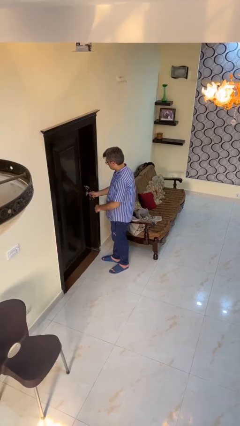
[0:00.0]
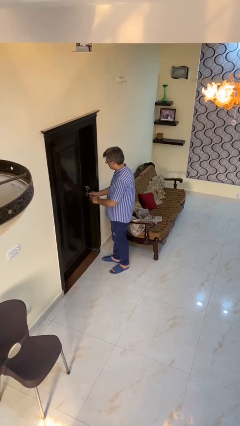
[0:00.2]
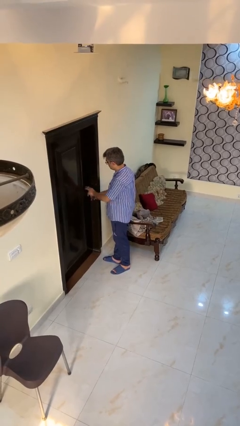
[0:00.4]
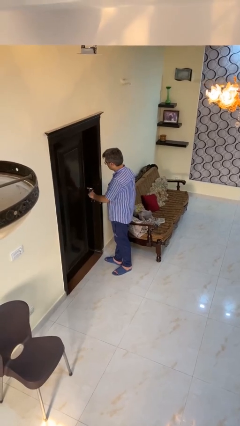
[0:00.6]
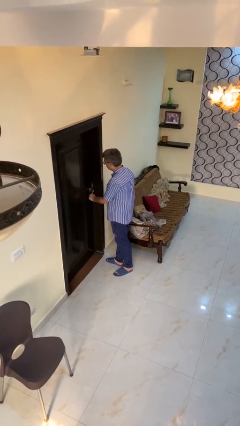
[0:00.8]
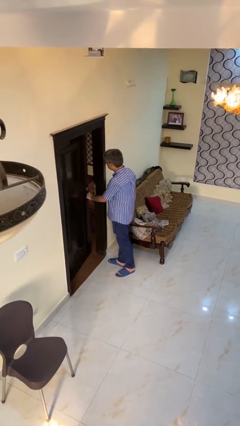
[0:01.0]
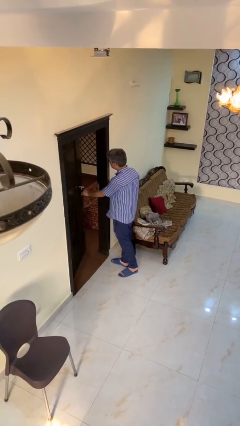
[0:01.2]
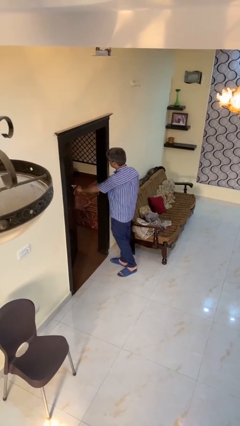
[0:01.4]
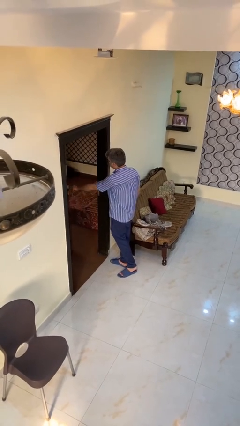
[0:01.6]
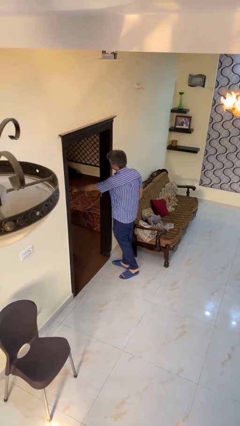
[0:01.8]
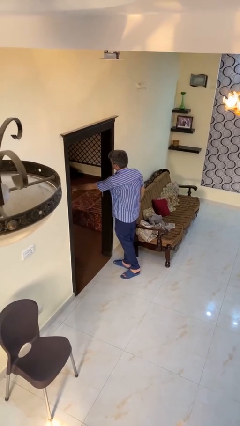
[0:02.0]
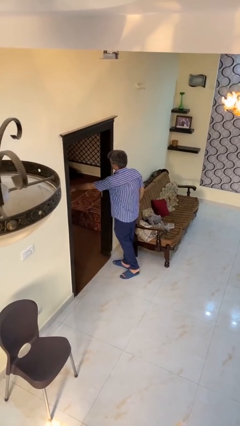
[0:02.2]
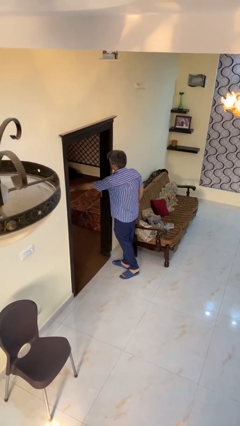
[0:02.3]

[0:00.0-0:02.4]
person opens facility door

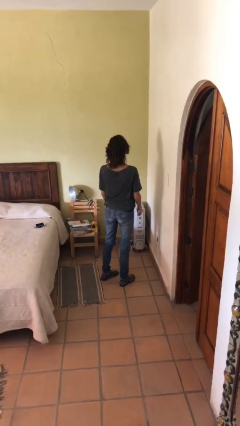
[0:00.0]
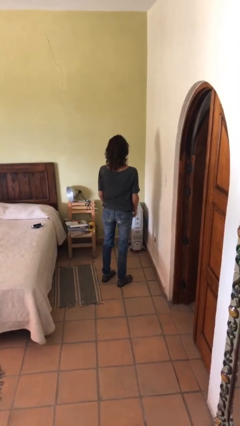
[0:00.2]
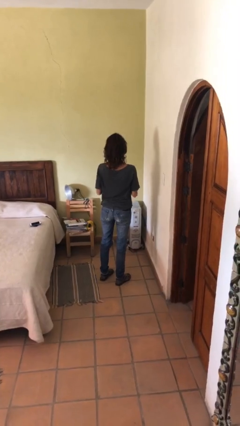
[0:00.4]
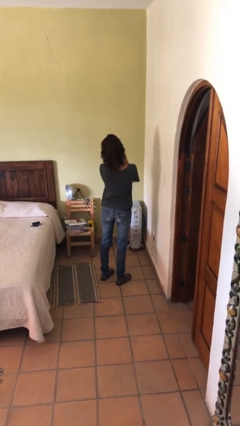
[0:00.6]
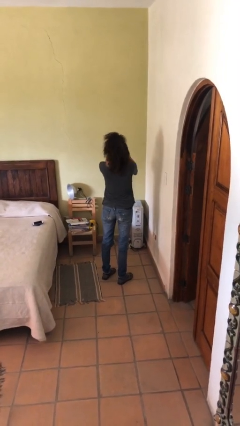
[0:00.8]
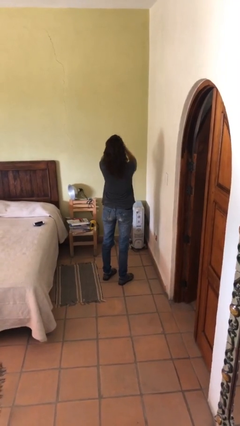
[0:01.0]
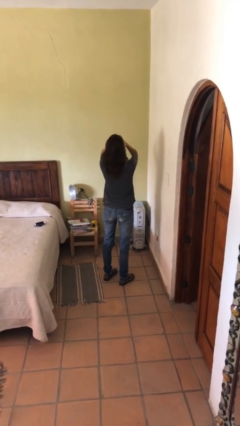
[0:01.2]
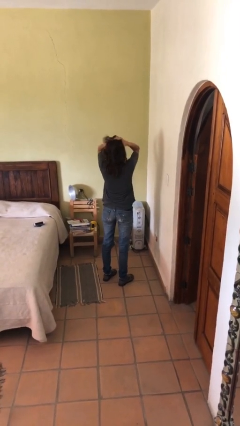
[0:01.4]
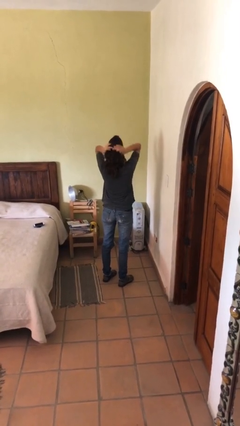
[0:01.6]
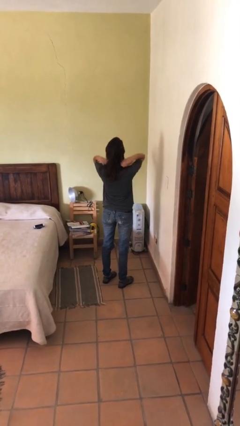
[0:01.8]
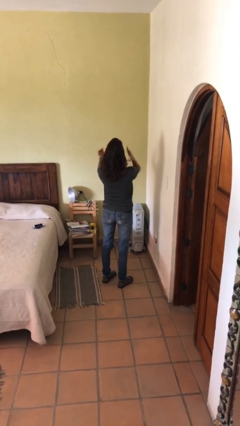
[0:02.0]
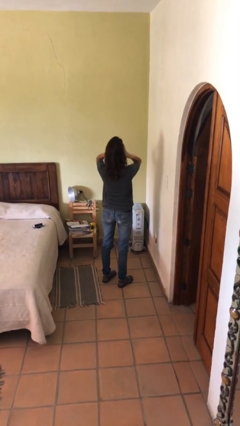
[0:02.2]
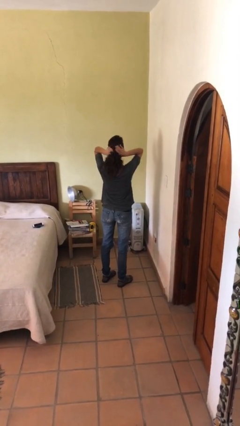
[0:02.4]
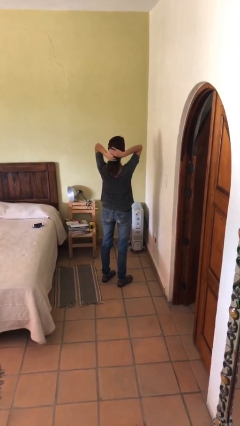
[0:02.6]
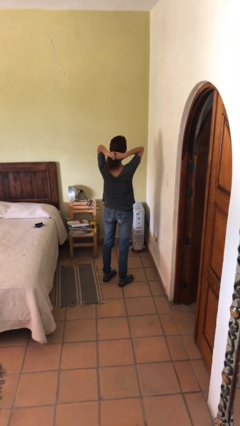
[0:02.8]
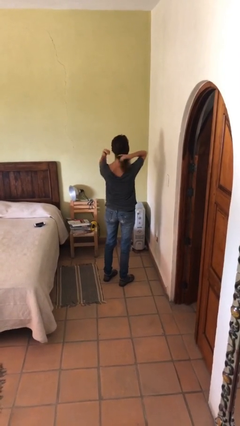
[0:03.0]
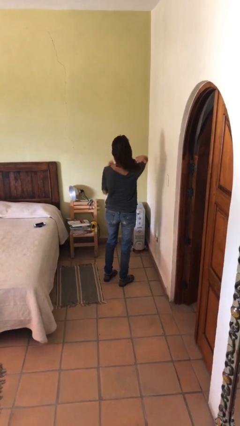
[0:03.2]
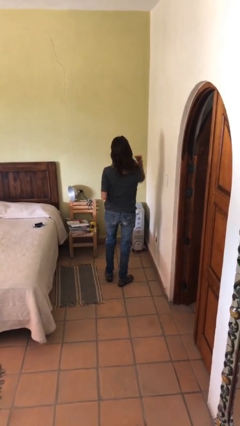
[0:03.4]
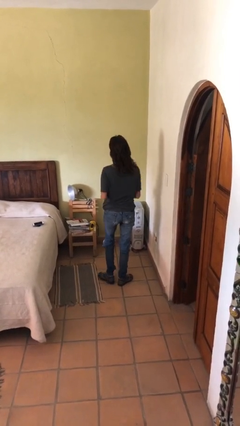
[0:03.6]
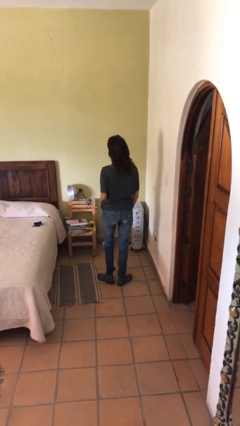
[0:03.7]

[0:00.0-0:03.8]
person strokes hair

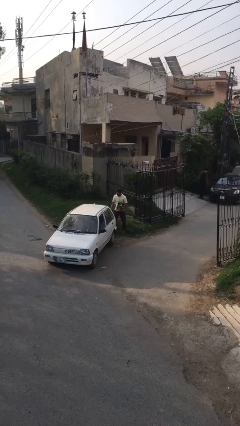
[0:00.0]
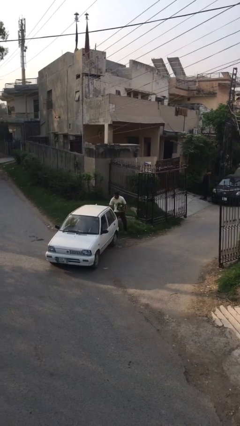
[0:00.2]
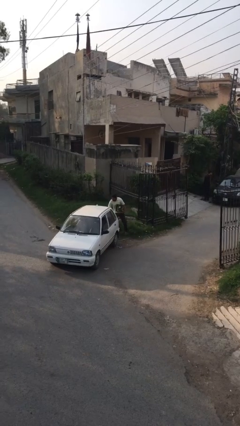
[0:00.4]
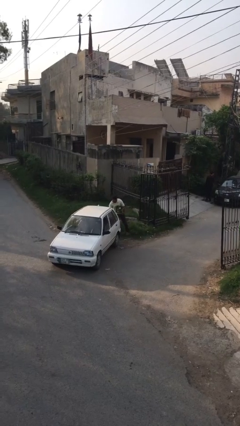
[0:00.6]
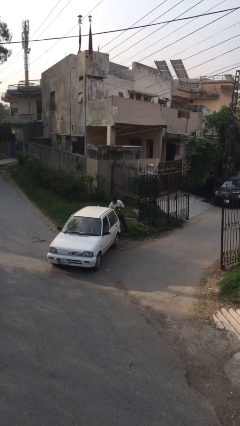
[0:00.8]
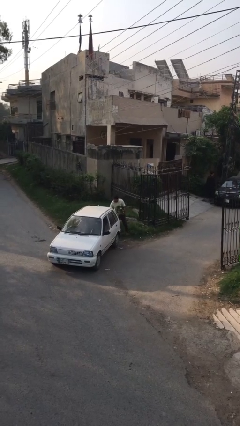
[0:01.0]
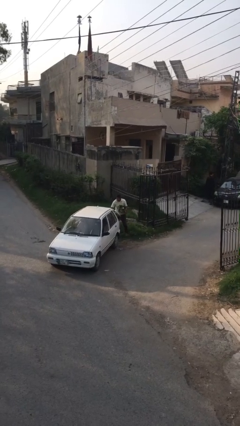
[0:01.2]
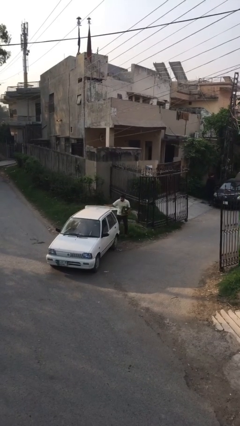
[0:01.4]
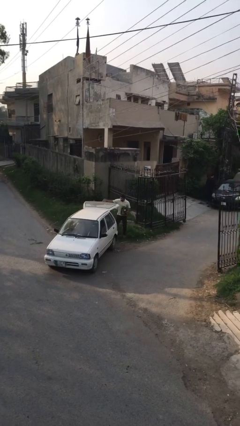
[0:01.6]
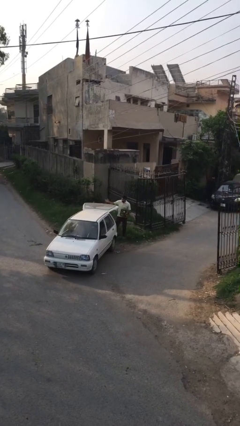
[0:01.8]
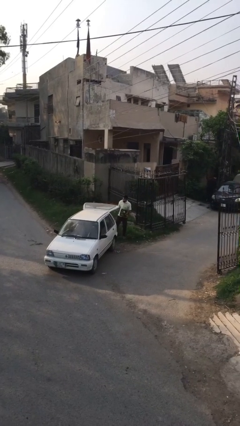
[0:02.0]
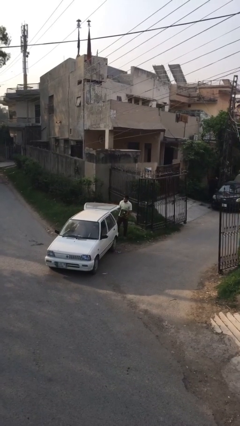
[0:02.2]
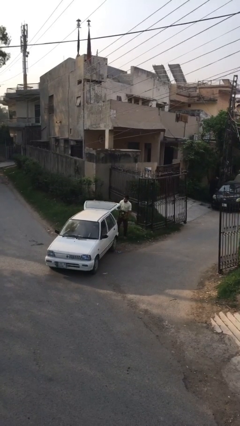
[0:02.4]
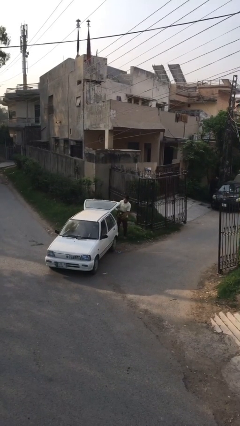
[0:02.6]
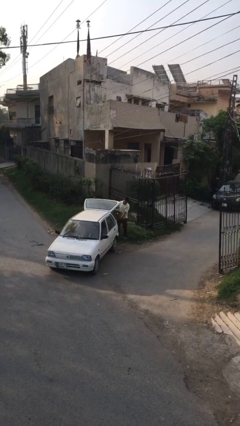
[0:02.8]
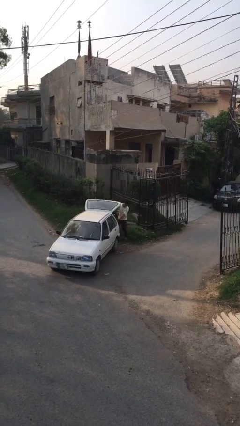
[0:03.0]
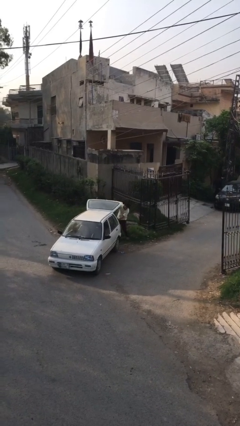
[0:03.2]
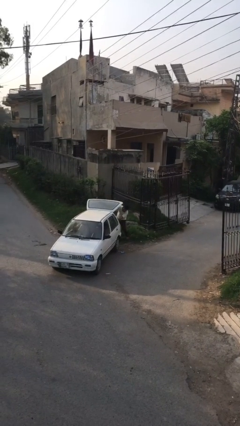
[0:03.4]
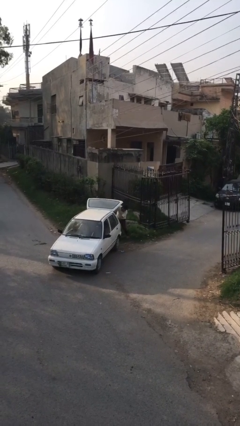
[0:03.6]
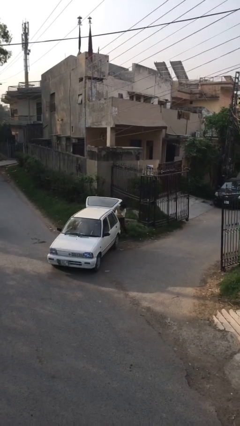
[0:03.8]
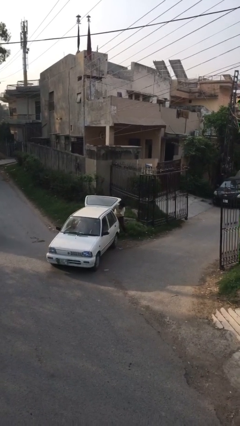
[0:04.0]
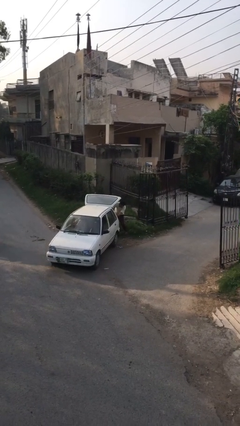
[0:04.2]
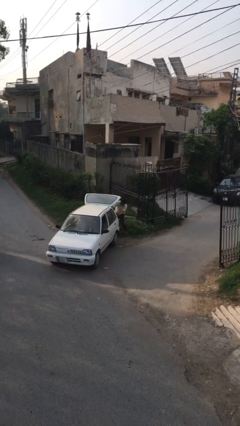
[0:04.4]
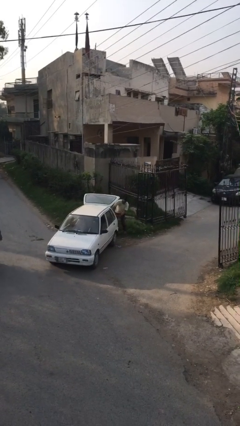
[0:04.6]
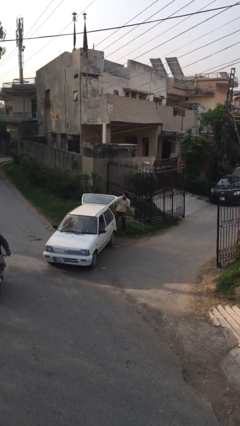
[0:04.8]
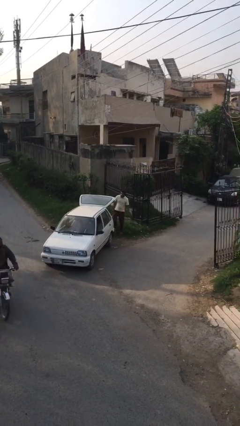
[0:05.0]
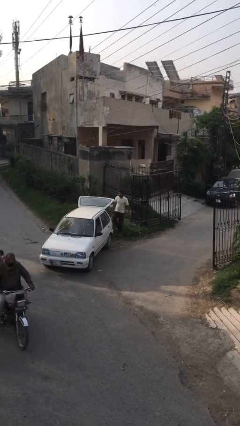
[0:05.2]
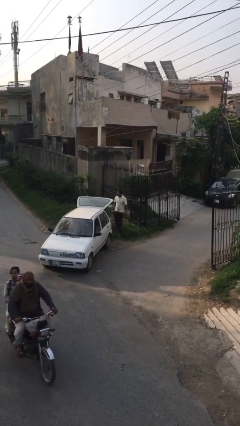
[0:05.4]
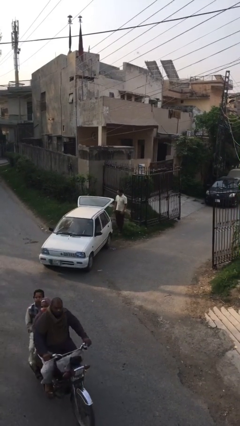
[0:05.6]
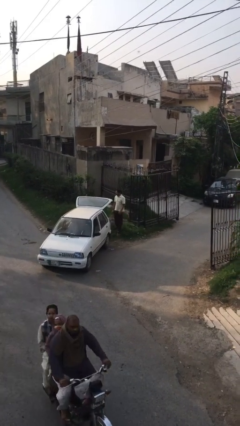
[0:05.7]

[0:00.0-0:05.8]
person loads car

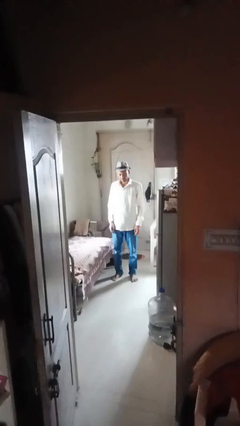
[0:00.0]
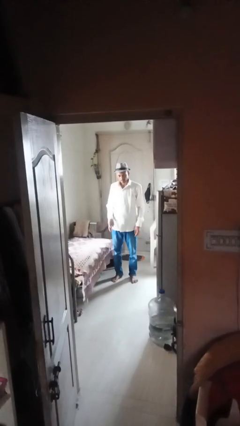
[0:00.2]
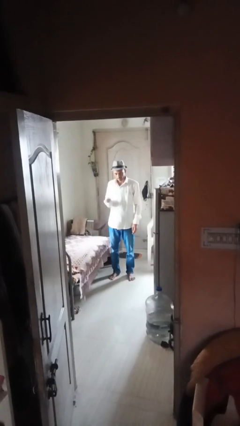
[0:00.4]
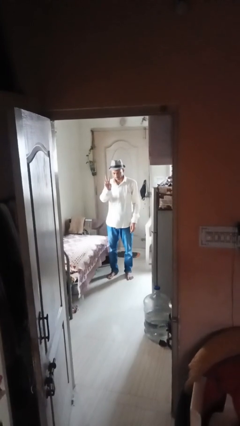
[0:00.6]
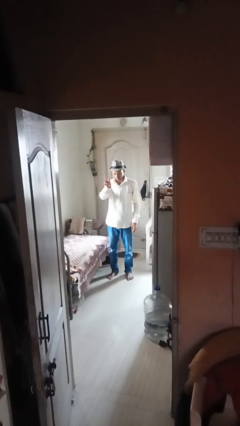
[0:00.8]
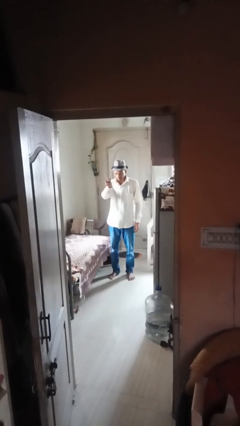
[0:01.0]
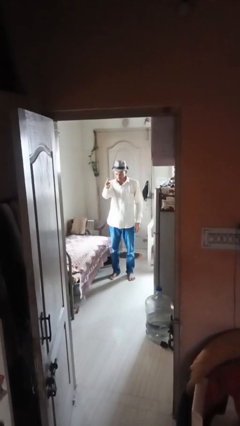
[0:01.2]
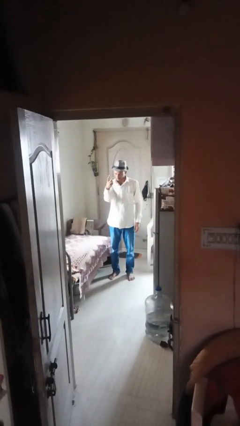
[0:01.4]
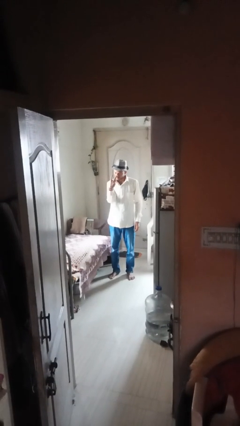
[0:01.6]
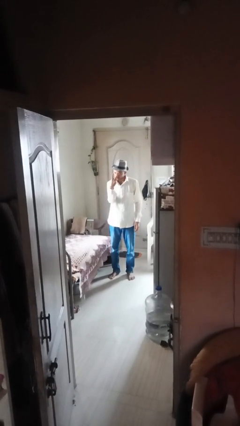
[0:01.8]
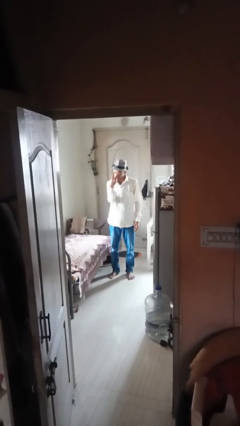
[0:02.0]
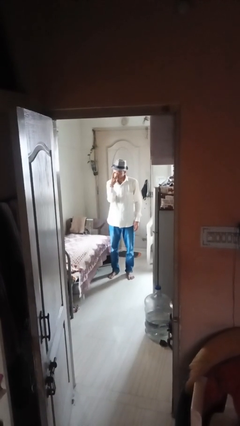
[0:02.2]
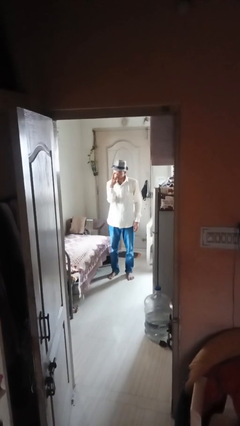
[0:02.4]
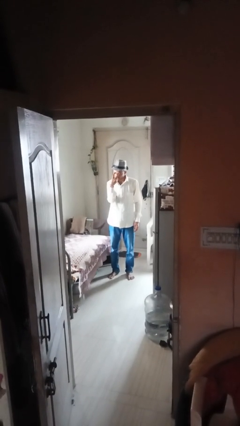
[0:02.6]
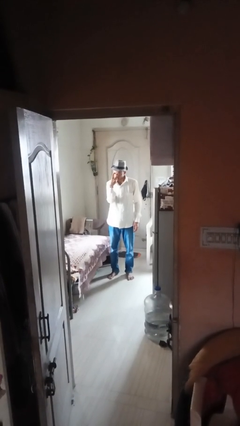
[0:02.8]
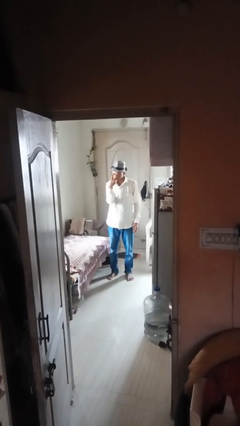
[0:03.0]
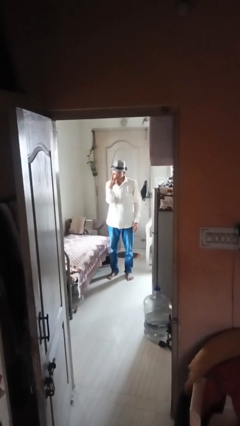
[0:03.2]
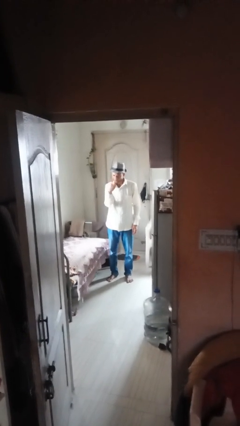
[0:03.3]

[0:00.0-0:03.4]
person gestures watch closely

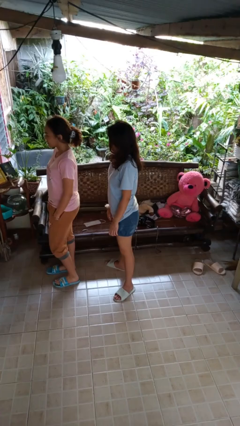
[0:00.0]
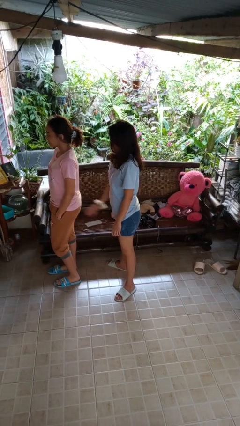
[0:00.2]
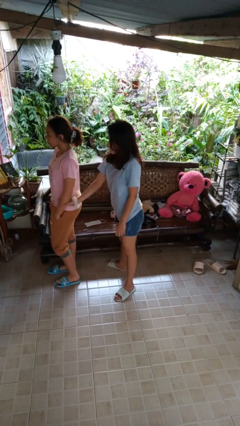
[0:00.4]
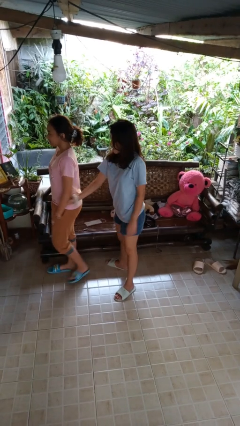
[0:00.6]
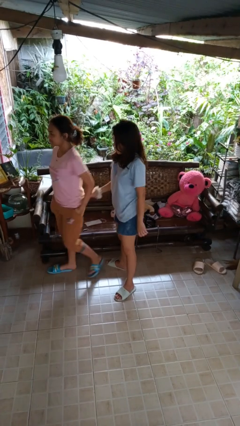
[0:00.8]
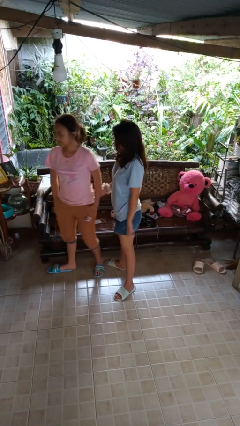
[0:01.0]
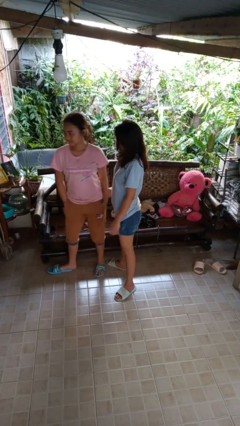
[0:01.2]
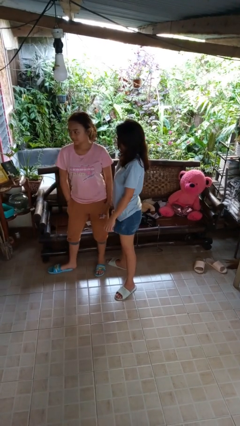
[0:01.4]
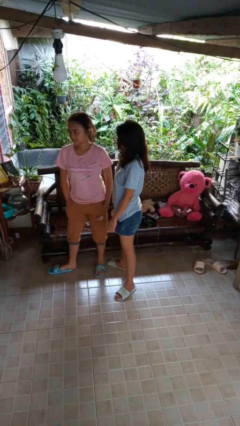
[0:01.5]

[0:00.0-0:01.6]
person grabs person by forearm

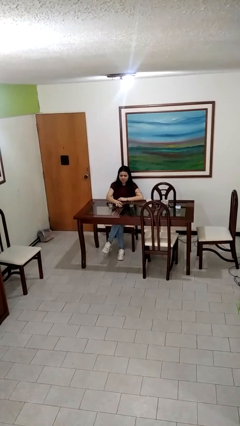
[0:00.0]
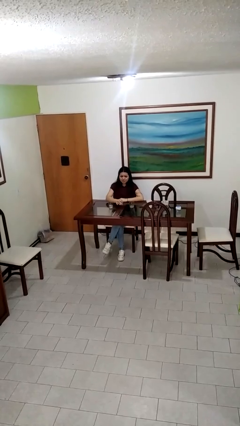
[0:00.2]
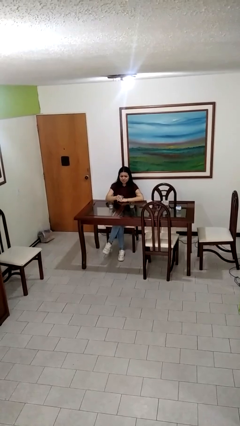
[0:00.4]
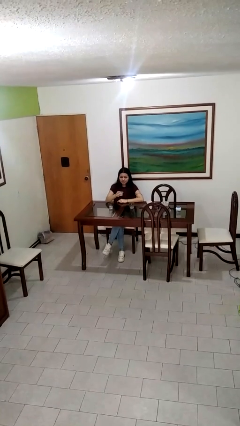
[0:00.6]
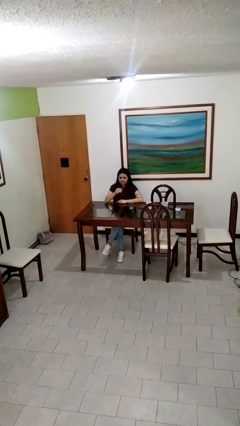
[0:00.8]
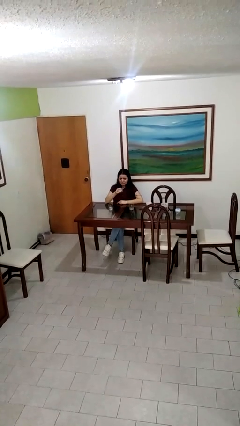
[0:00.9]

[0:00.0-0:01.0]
person picks up object from table
